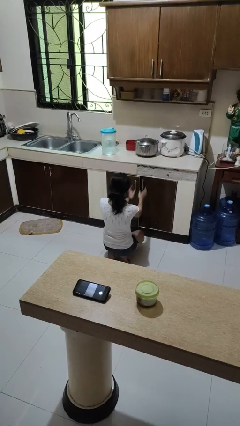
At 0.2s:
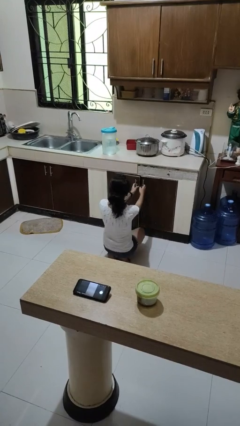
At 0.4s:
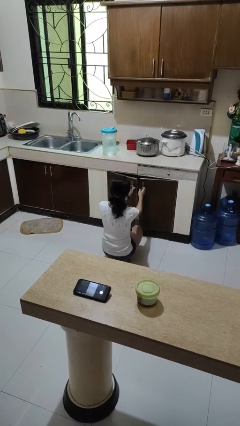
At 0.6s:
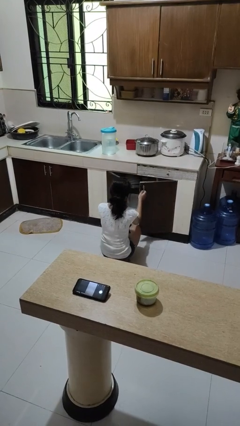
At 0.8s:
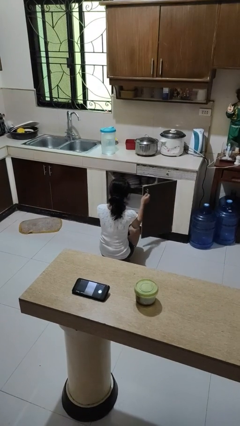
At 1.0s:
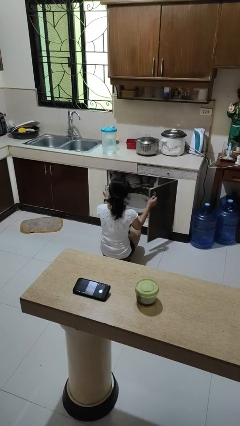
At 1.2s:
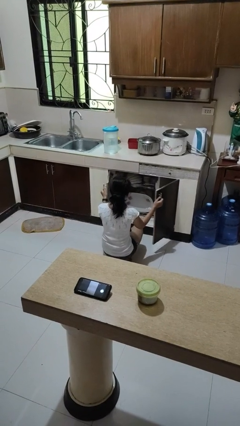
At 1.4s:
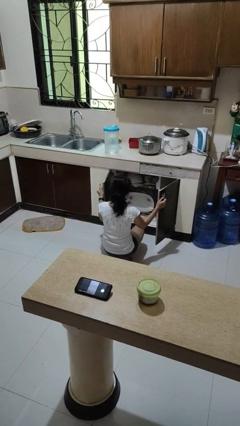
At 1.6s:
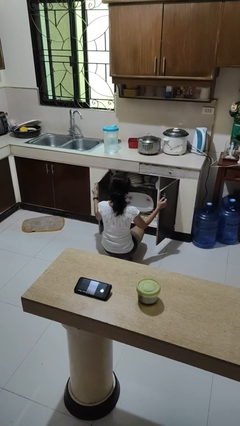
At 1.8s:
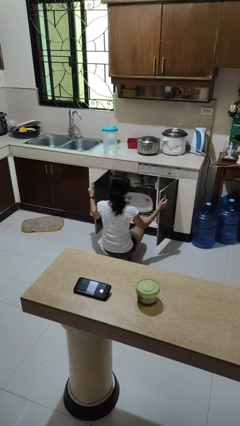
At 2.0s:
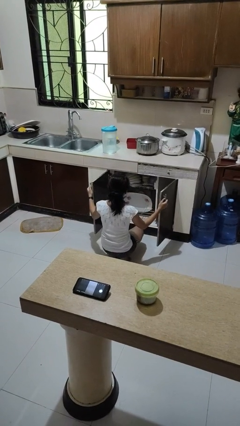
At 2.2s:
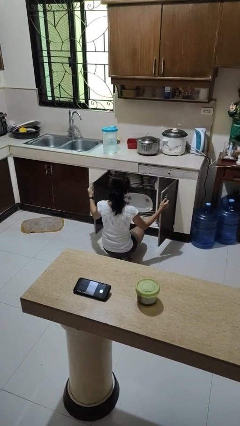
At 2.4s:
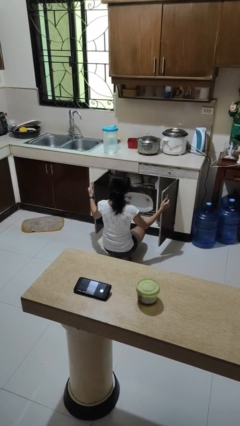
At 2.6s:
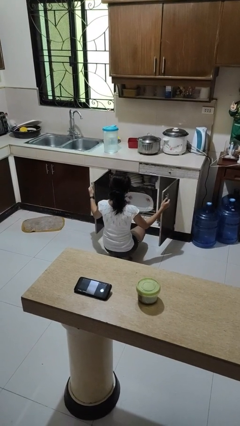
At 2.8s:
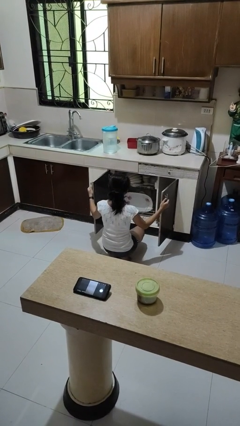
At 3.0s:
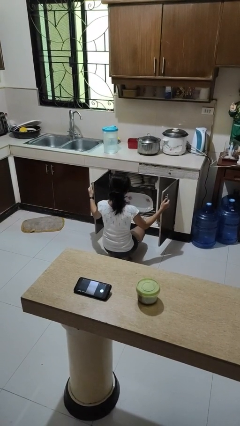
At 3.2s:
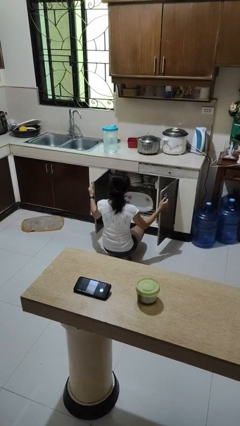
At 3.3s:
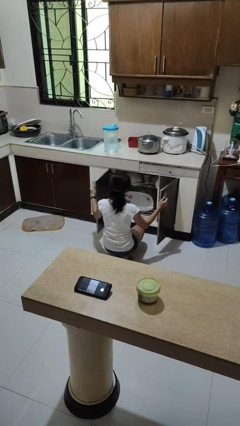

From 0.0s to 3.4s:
person opens dishwasher

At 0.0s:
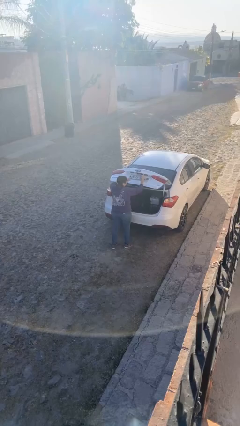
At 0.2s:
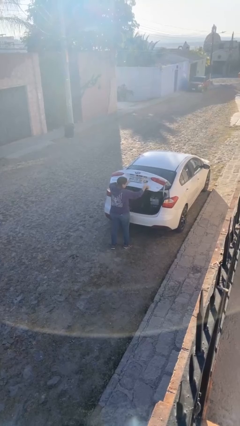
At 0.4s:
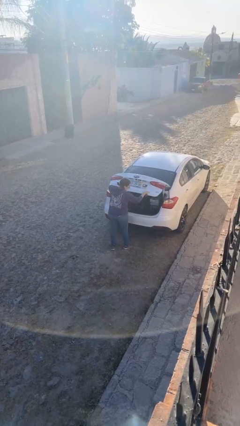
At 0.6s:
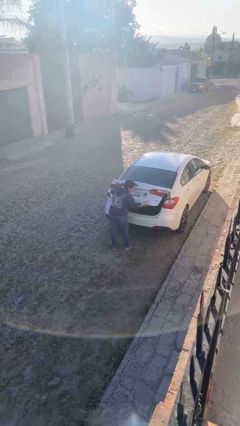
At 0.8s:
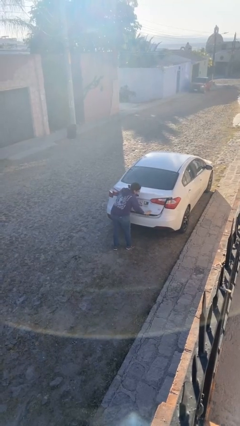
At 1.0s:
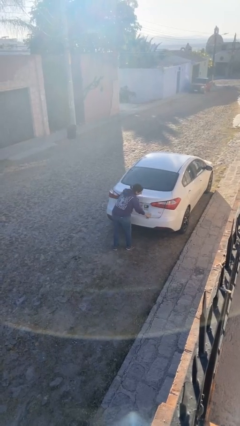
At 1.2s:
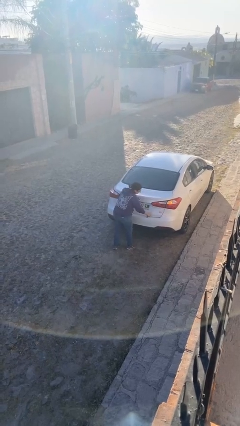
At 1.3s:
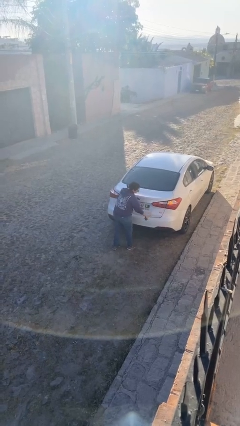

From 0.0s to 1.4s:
person closes car trunk

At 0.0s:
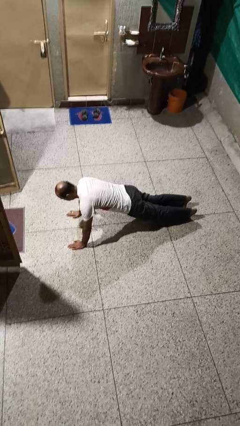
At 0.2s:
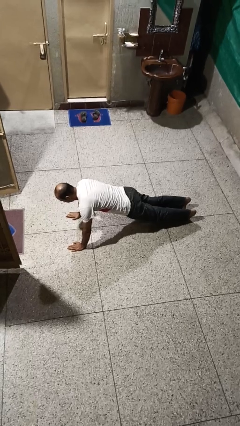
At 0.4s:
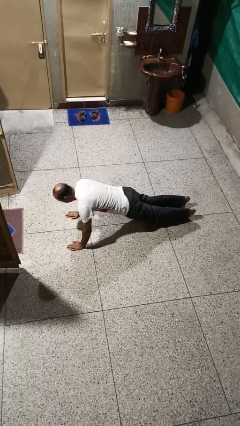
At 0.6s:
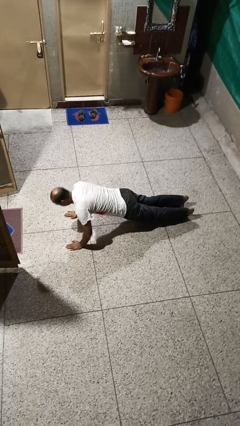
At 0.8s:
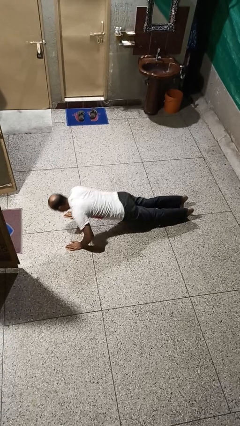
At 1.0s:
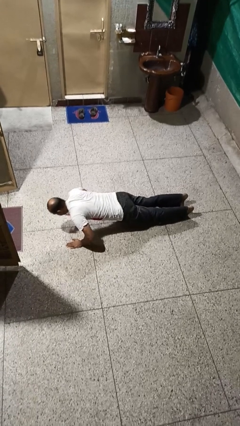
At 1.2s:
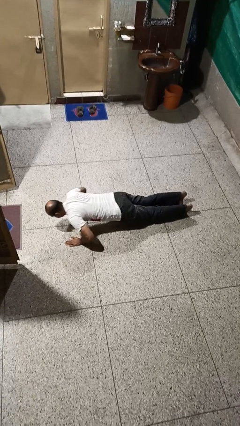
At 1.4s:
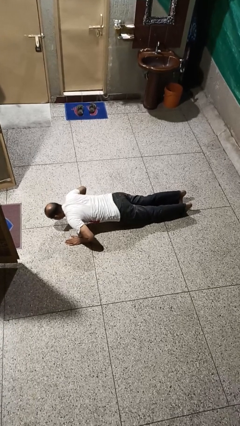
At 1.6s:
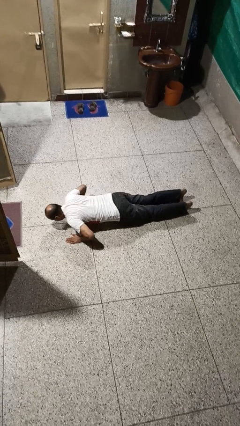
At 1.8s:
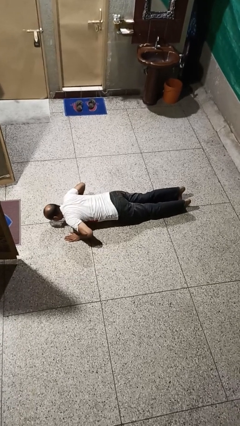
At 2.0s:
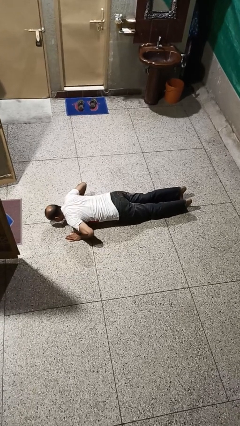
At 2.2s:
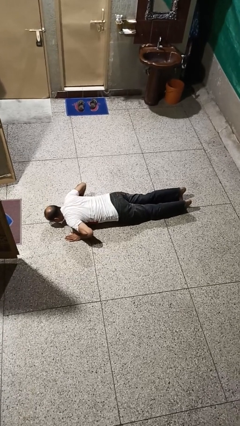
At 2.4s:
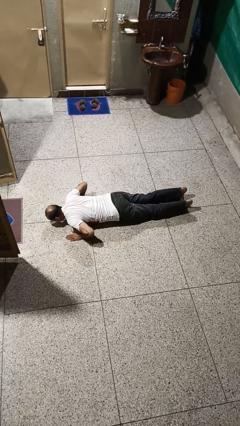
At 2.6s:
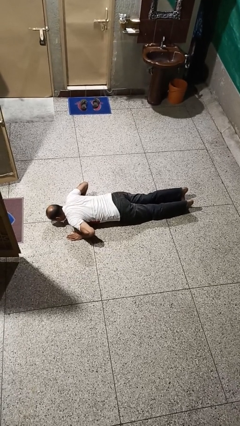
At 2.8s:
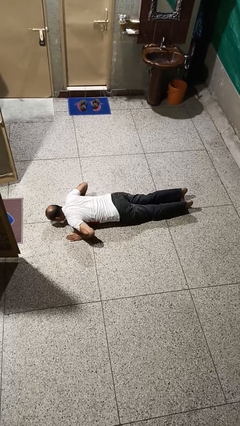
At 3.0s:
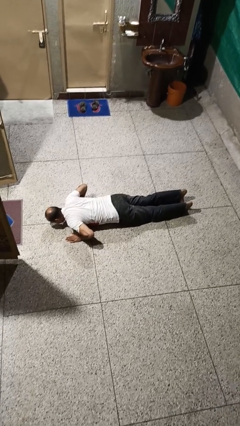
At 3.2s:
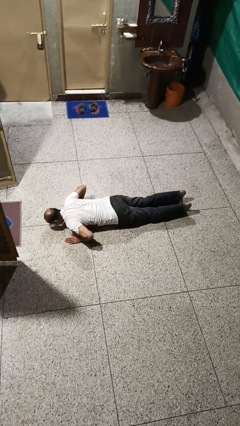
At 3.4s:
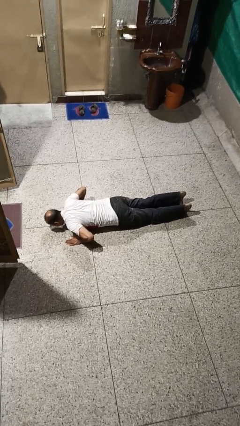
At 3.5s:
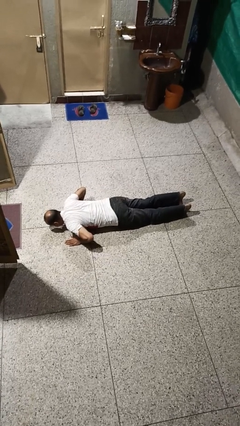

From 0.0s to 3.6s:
person exercises with pushup

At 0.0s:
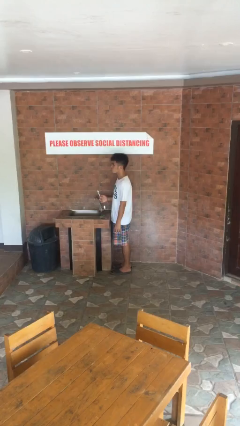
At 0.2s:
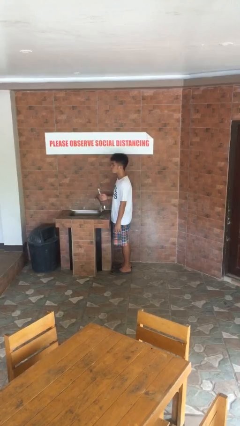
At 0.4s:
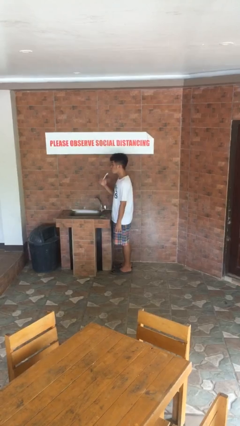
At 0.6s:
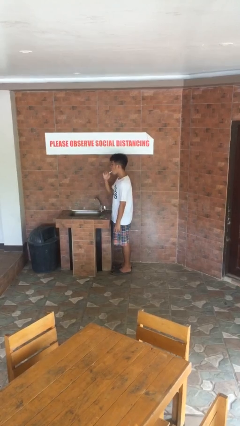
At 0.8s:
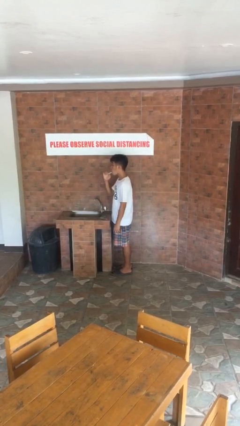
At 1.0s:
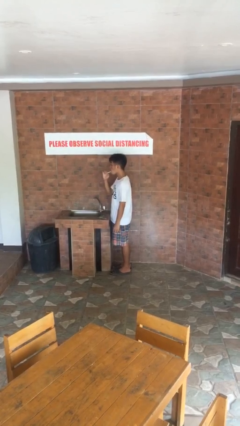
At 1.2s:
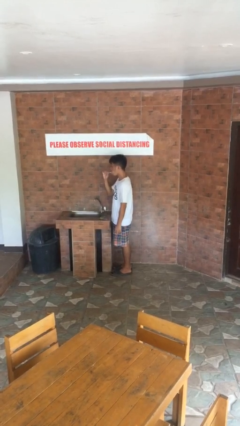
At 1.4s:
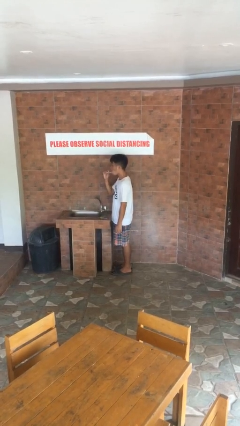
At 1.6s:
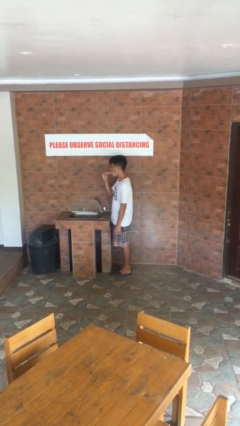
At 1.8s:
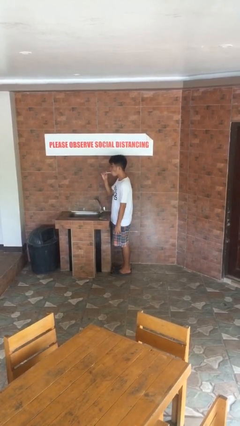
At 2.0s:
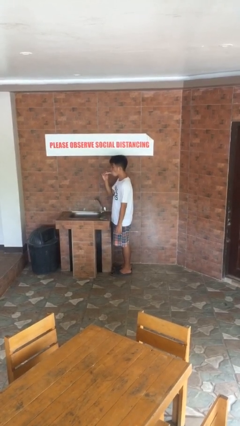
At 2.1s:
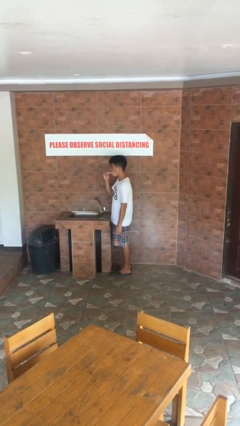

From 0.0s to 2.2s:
person brushes teeth

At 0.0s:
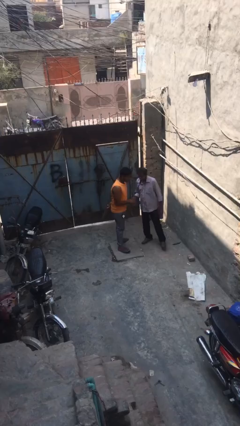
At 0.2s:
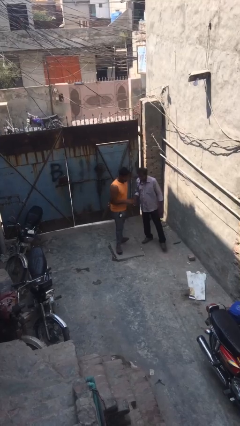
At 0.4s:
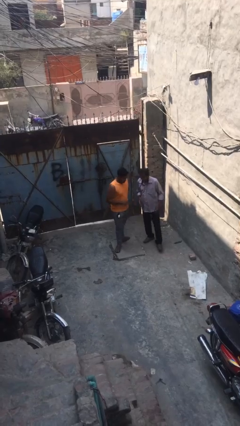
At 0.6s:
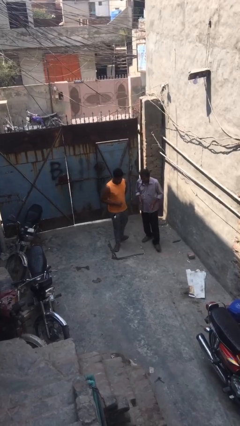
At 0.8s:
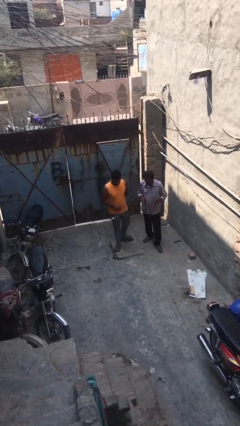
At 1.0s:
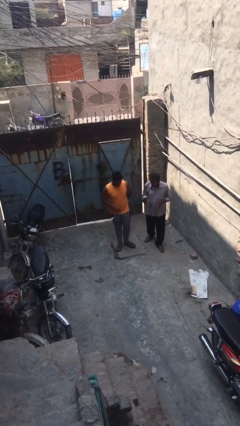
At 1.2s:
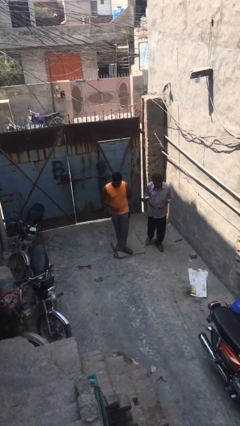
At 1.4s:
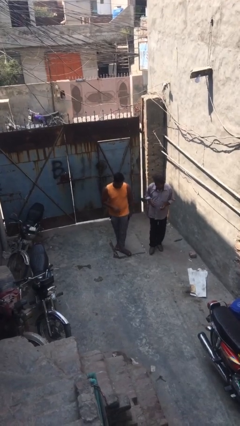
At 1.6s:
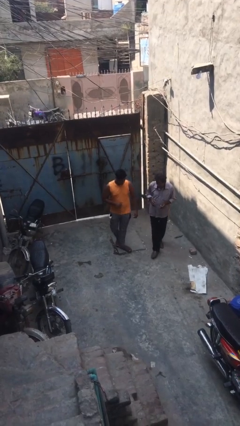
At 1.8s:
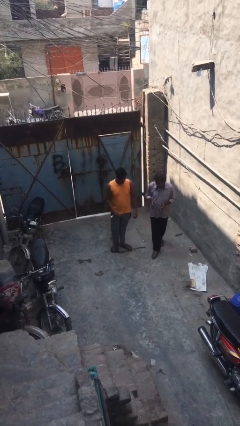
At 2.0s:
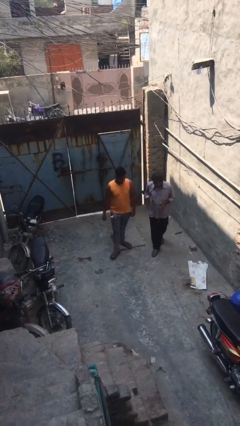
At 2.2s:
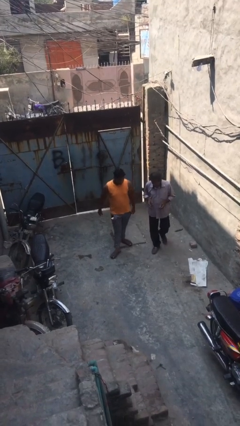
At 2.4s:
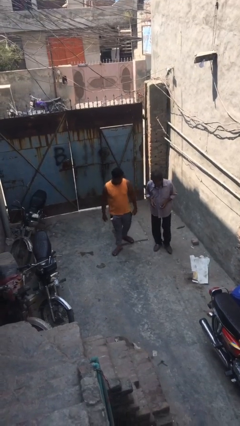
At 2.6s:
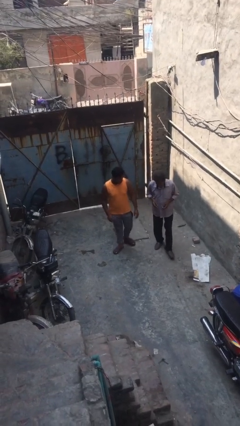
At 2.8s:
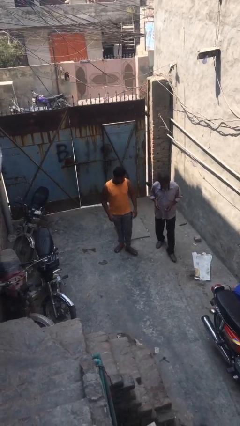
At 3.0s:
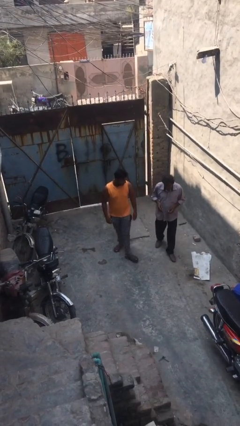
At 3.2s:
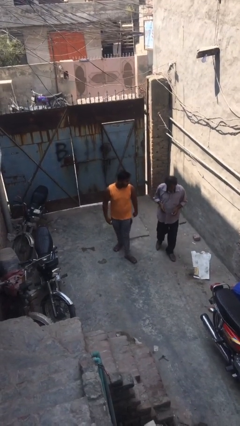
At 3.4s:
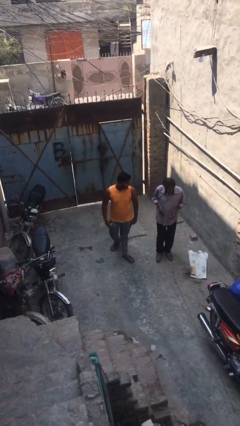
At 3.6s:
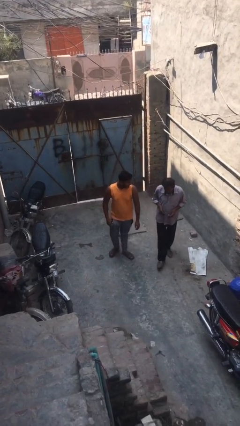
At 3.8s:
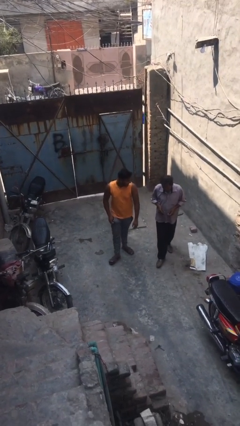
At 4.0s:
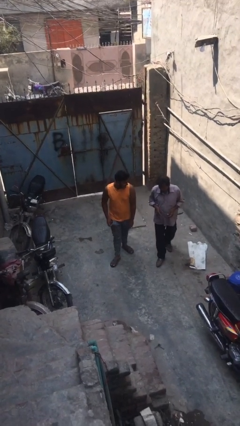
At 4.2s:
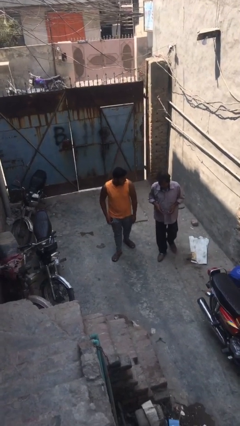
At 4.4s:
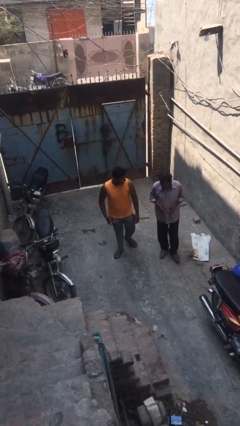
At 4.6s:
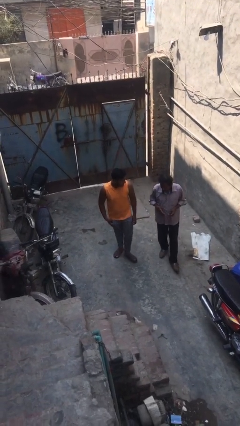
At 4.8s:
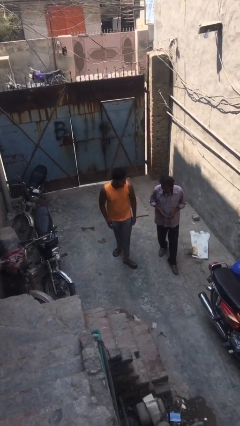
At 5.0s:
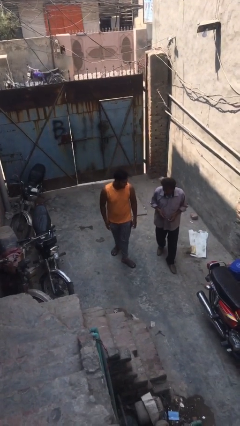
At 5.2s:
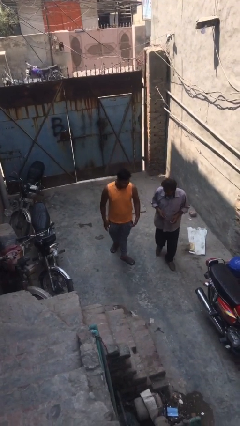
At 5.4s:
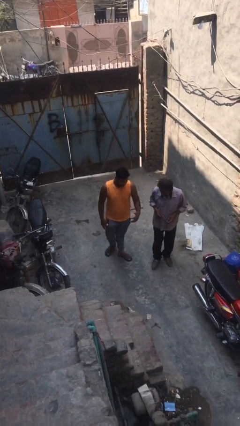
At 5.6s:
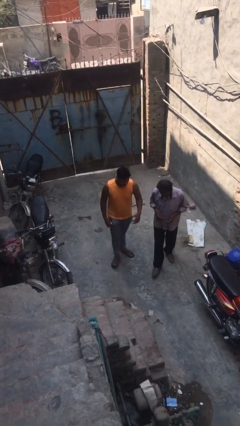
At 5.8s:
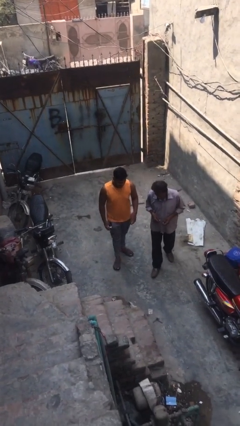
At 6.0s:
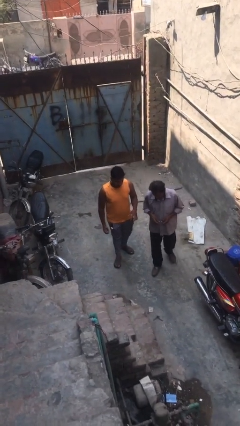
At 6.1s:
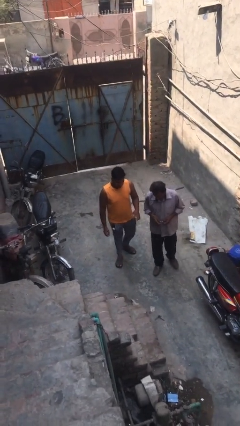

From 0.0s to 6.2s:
person talks to person

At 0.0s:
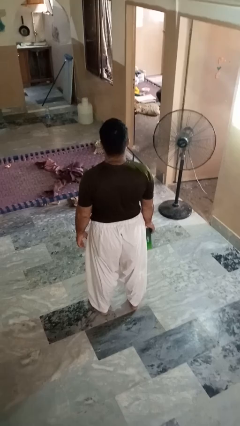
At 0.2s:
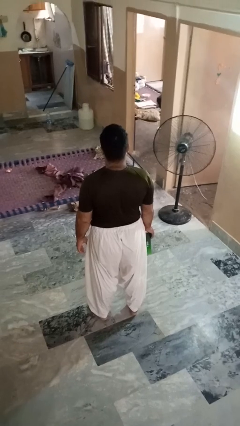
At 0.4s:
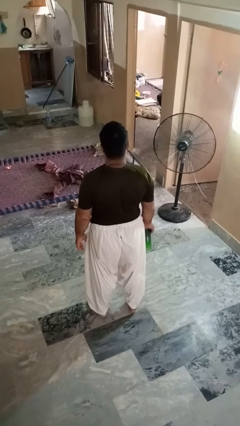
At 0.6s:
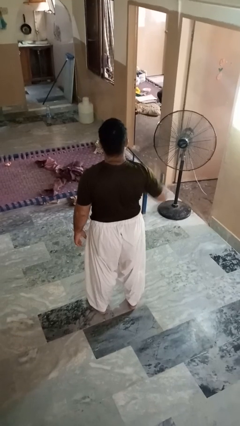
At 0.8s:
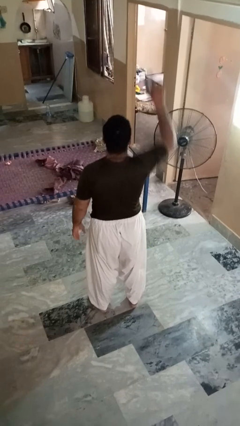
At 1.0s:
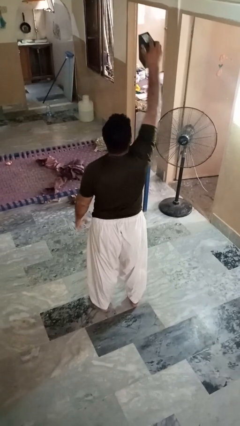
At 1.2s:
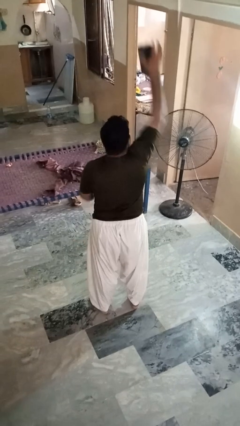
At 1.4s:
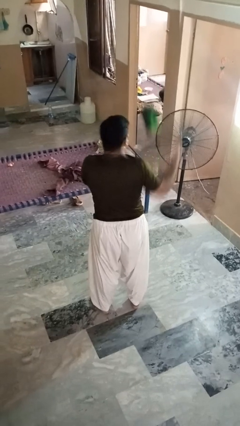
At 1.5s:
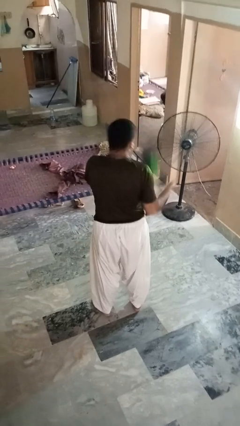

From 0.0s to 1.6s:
person drops object
